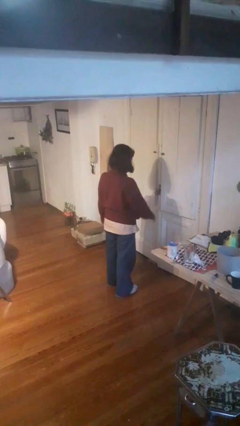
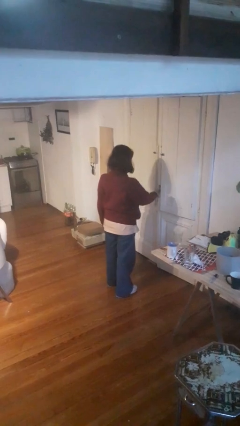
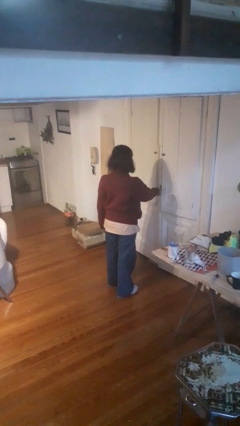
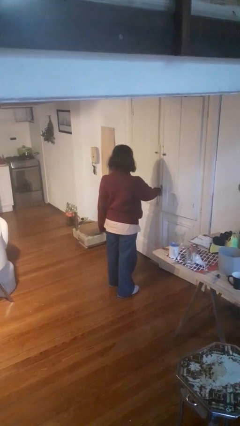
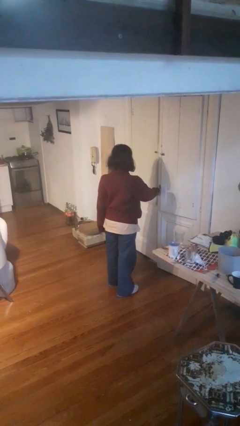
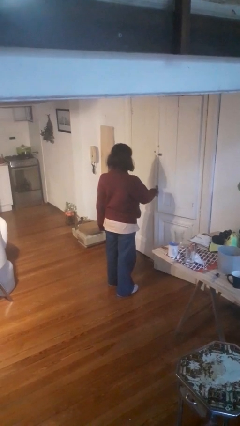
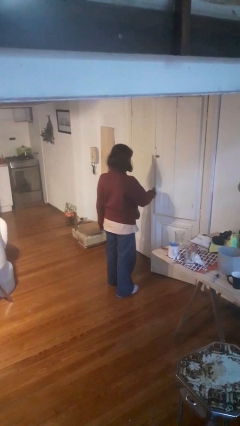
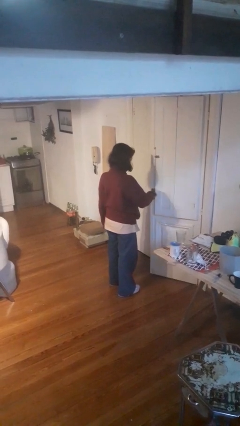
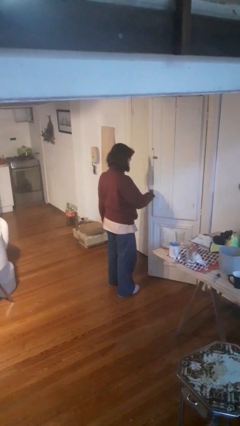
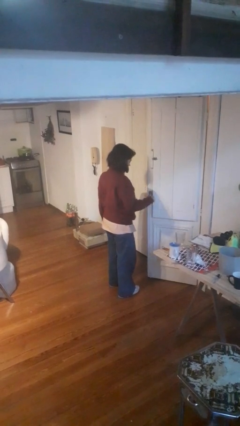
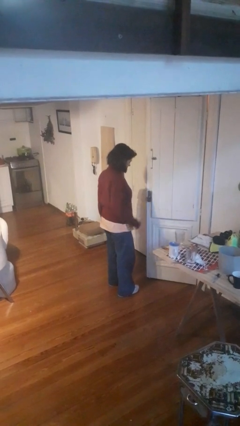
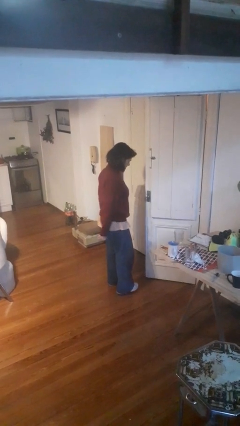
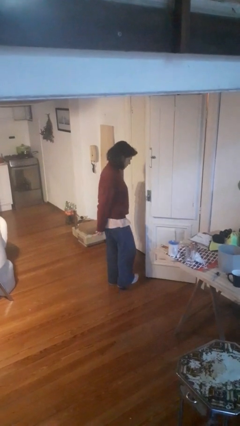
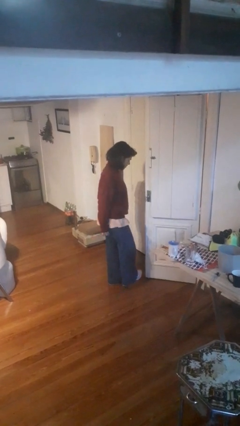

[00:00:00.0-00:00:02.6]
person opens facility door

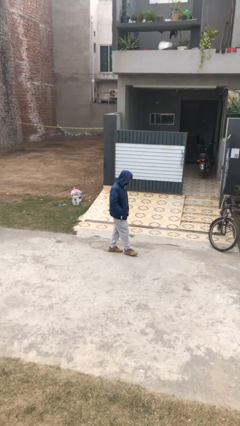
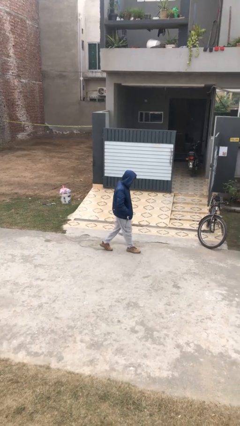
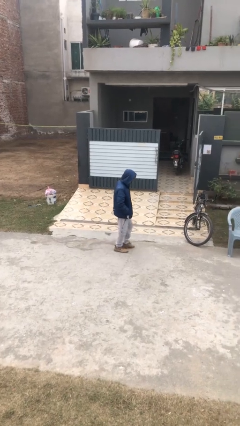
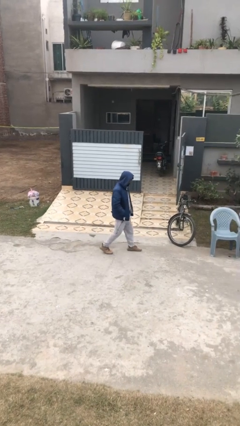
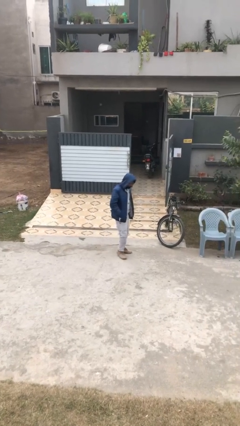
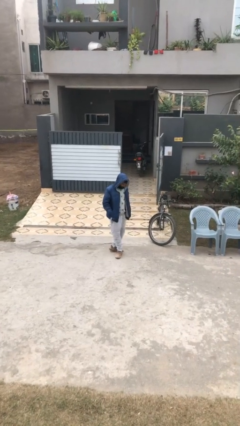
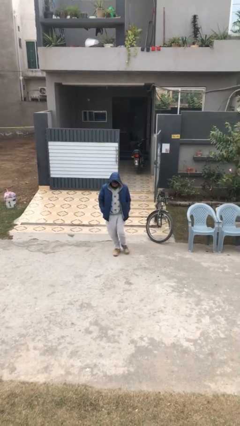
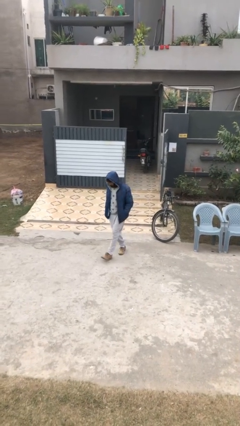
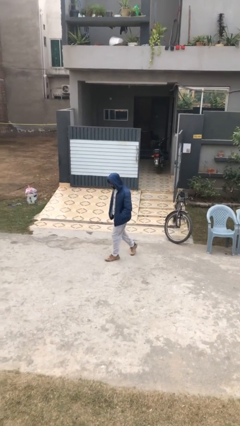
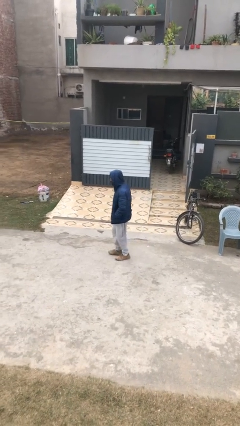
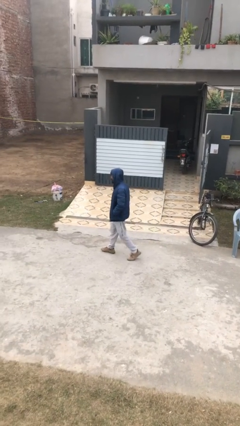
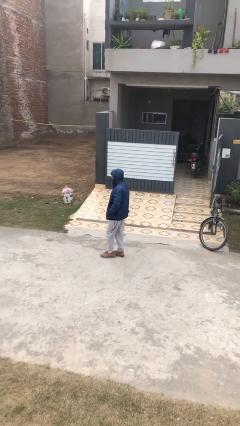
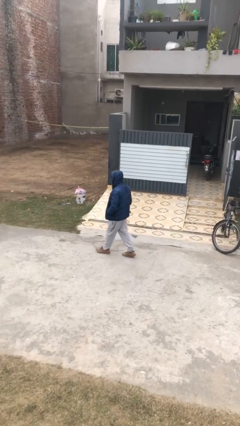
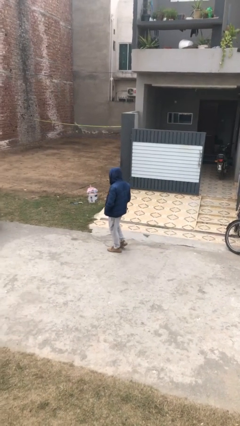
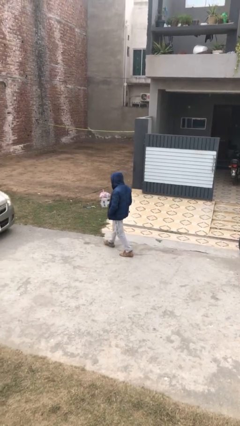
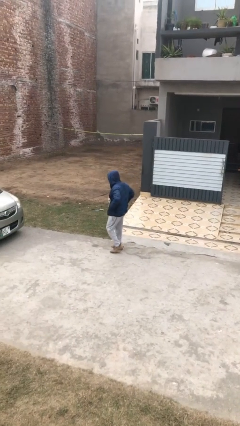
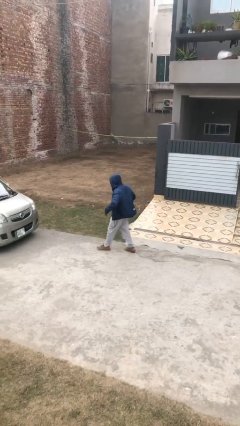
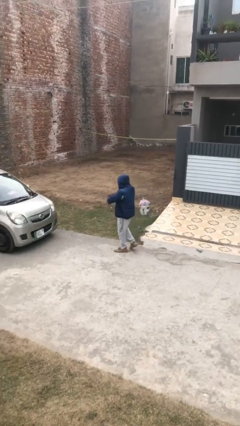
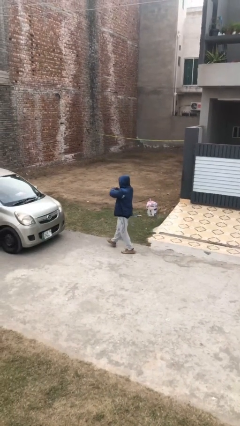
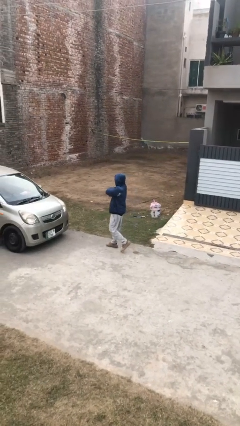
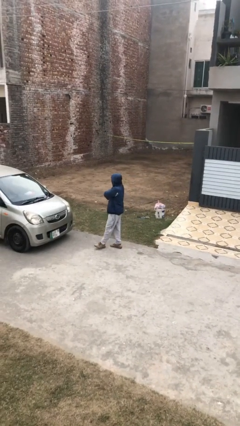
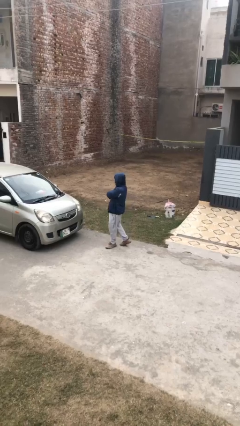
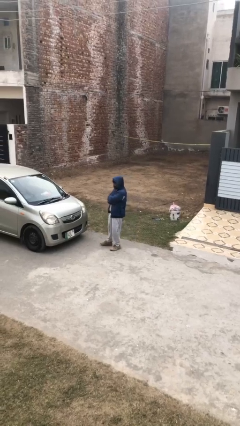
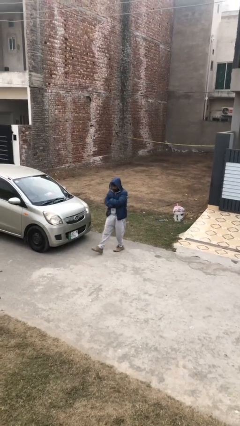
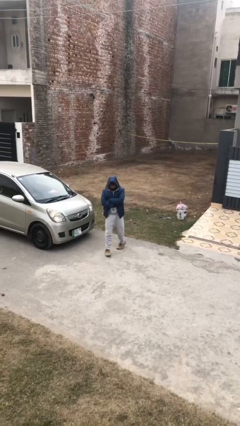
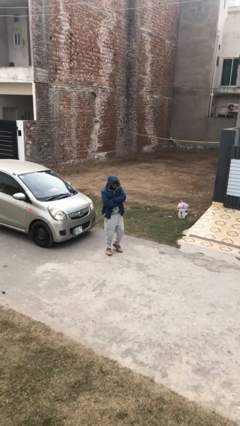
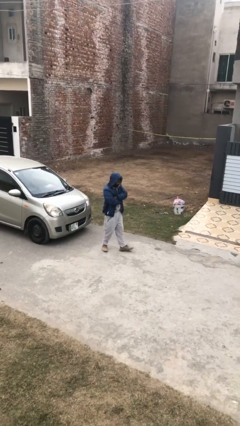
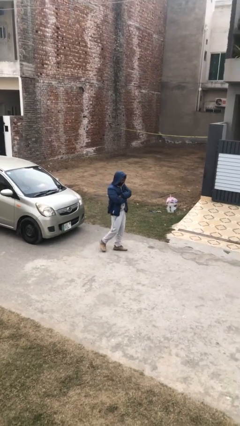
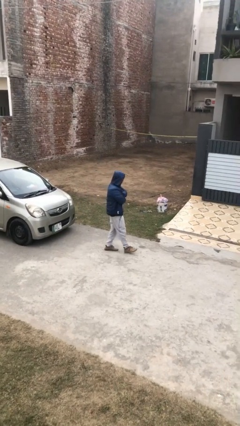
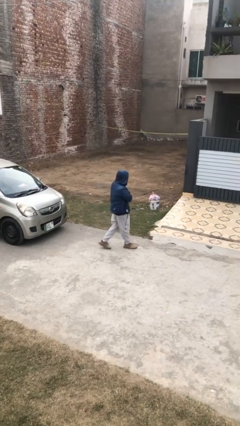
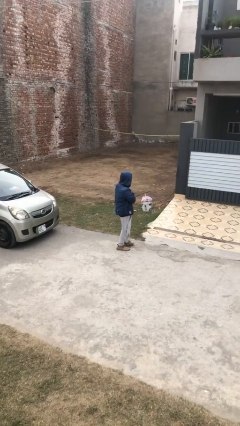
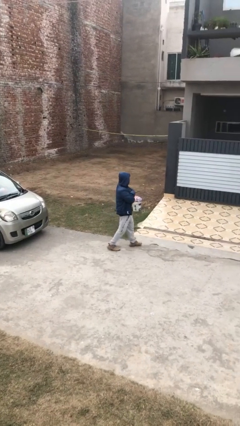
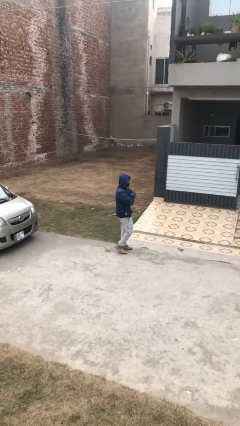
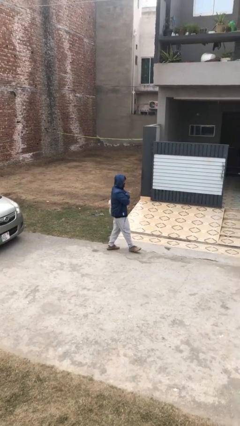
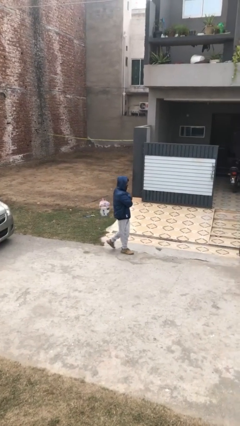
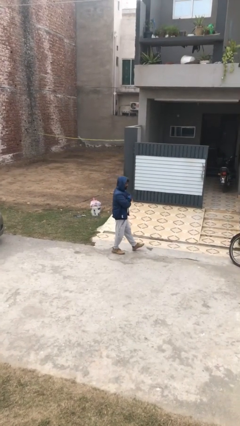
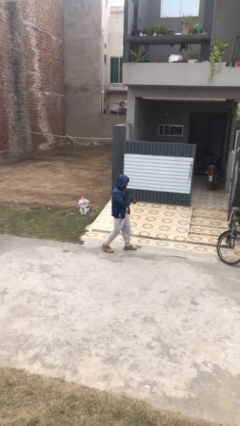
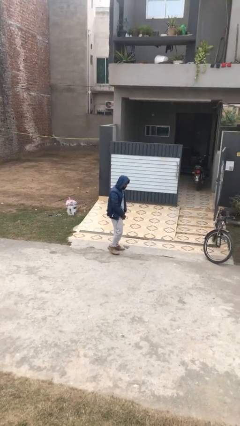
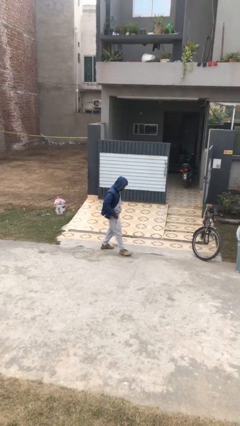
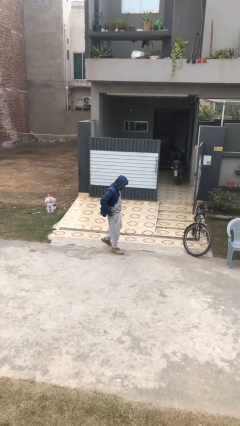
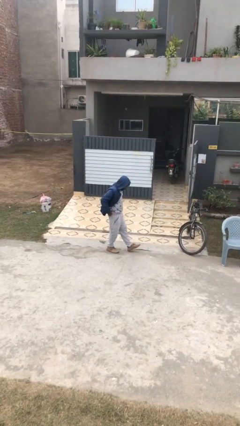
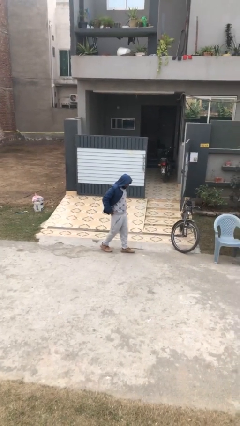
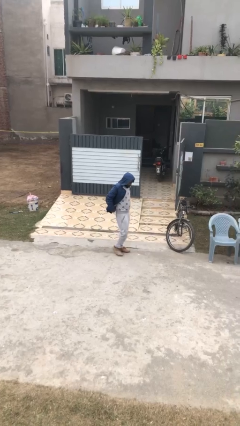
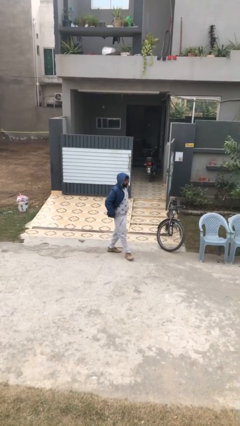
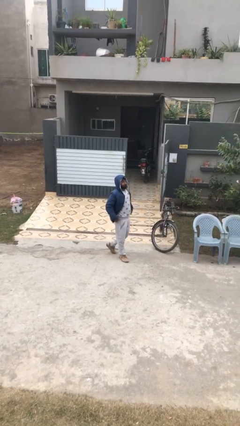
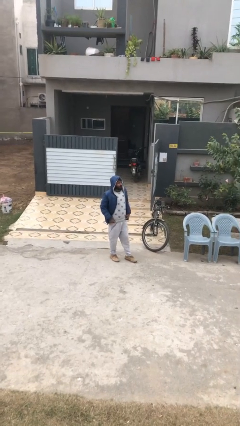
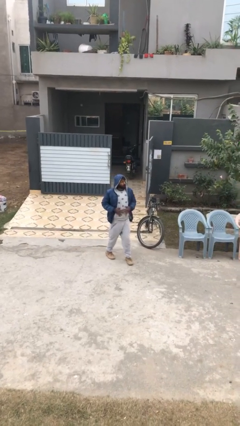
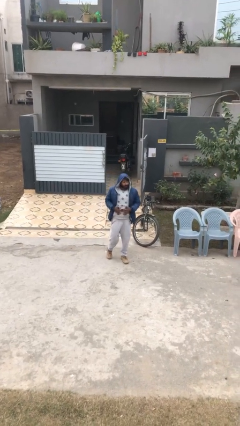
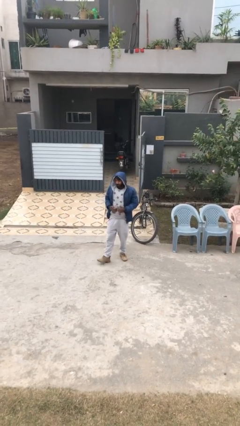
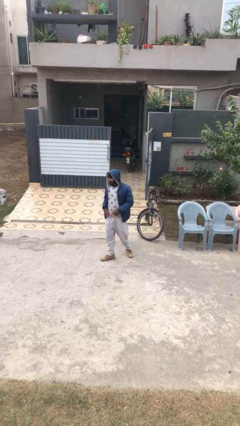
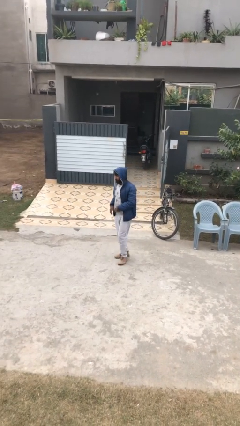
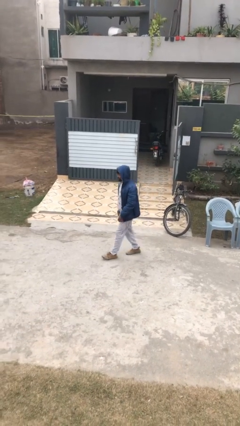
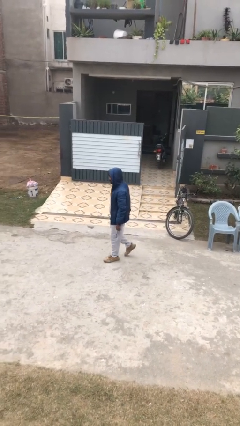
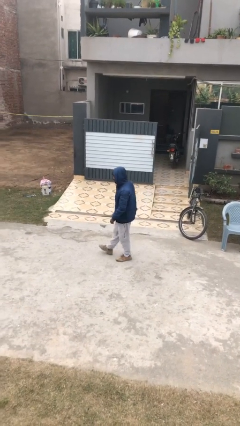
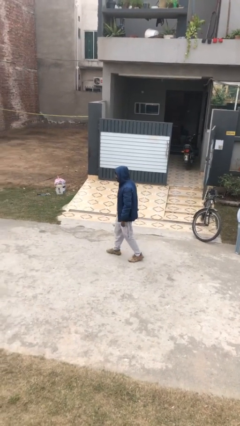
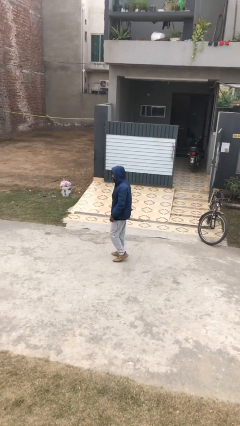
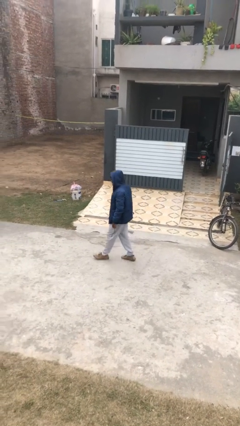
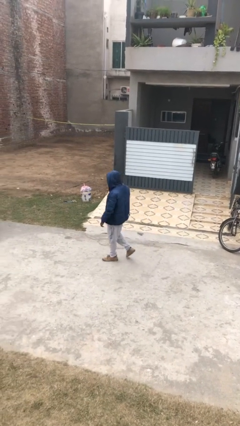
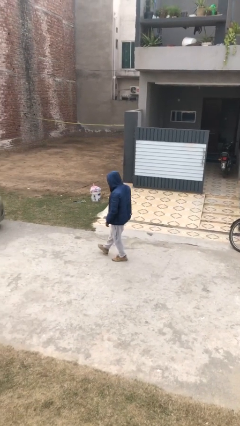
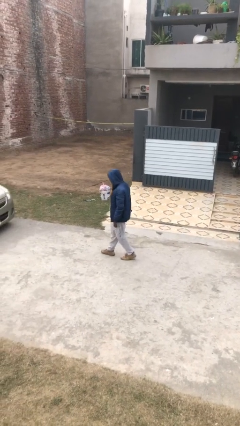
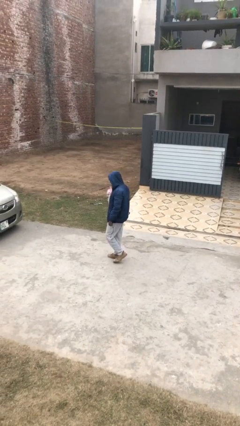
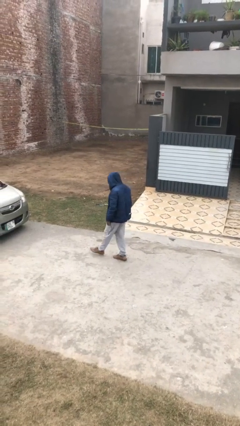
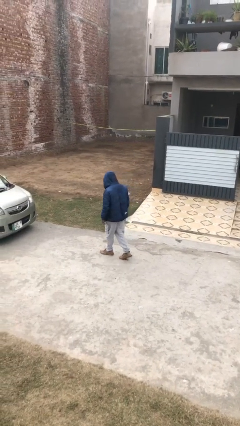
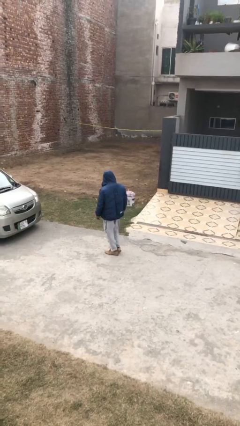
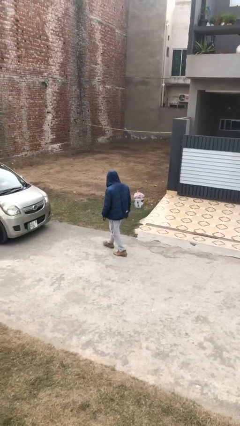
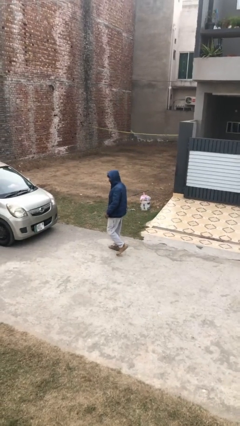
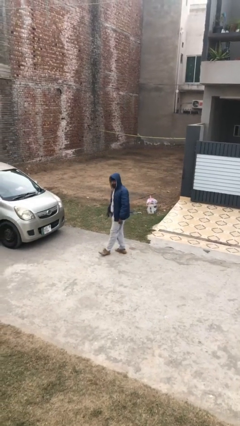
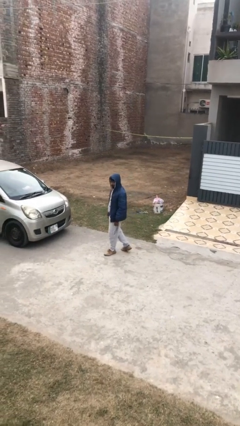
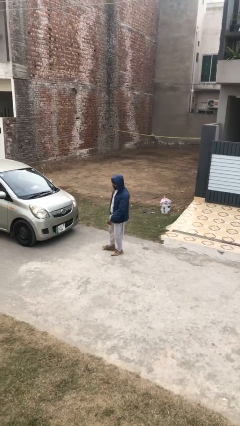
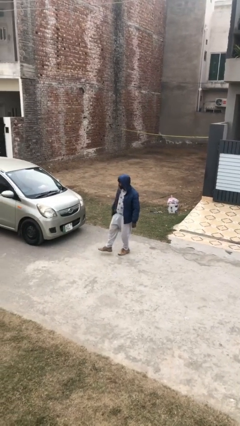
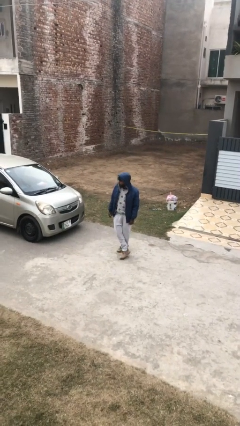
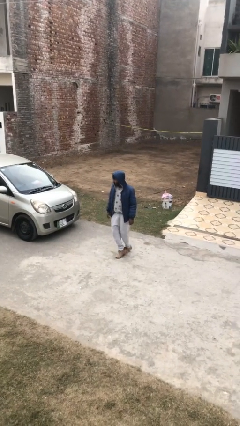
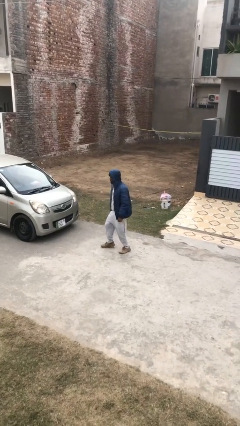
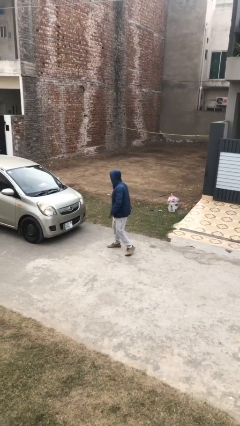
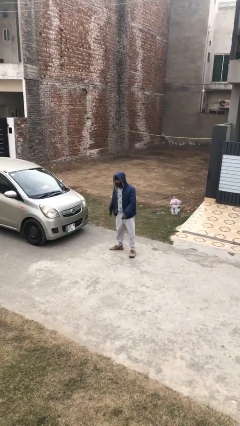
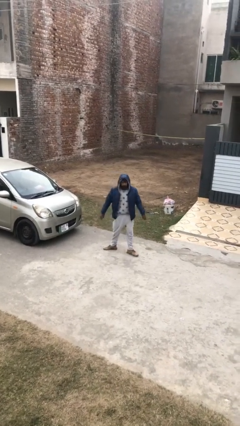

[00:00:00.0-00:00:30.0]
person walks

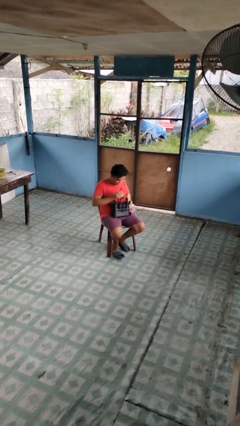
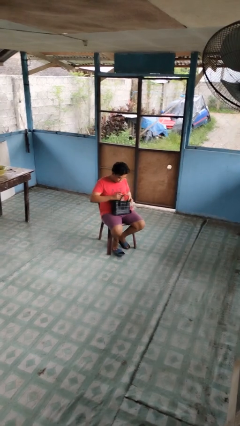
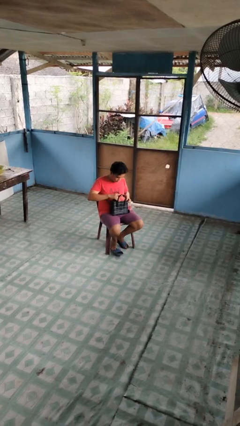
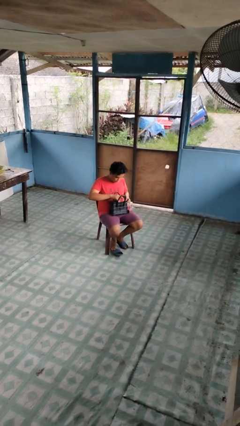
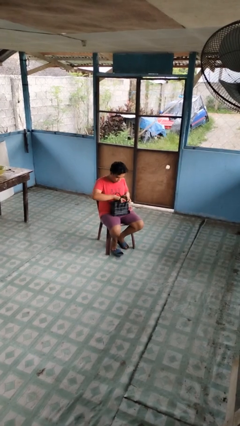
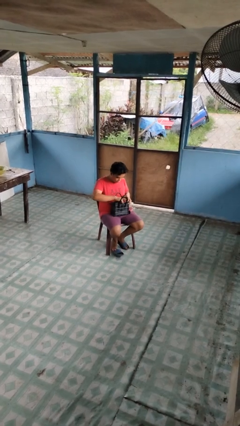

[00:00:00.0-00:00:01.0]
person puts object into purse
